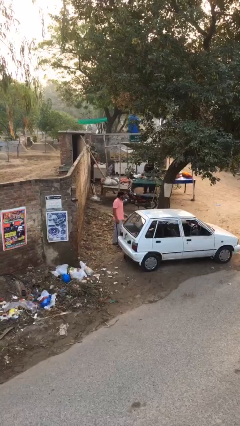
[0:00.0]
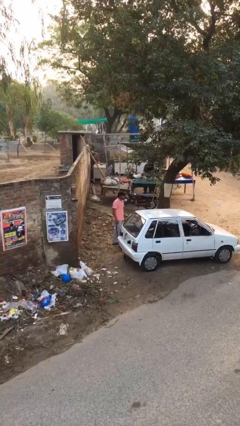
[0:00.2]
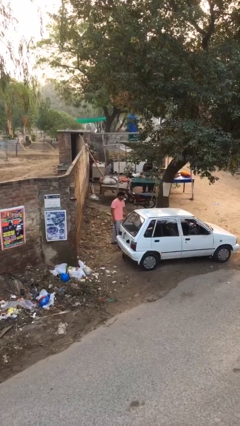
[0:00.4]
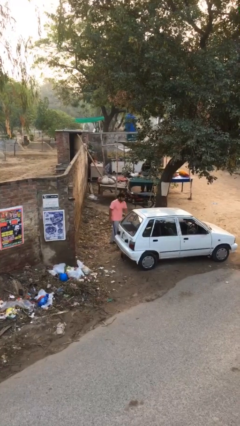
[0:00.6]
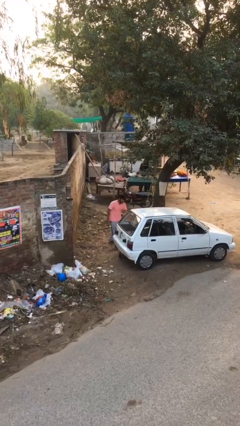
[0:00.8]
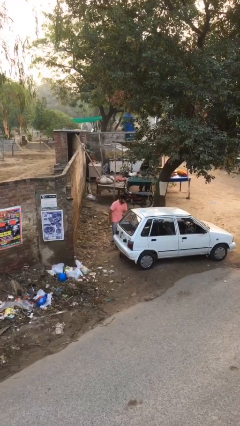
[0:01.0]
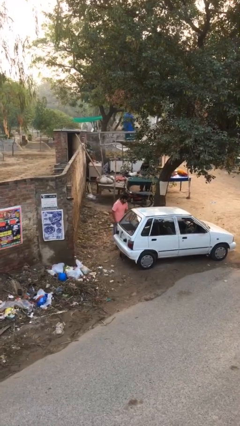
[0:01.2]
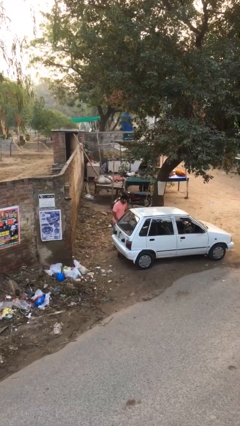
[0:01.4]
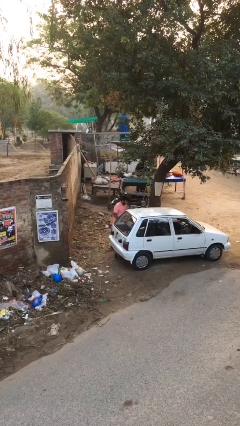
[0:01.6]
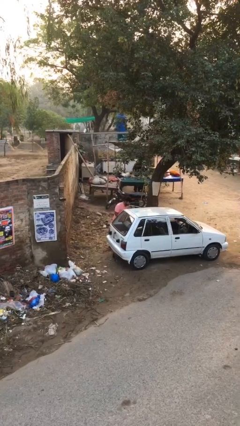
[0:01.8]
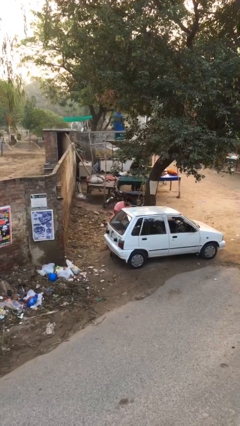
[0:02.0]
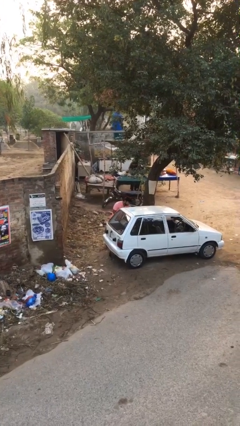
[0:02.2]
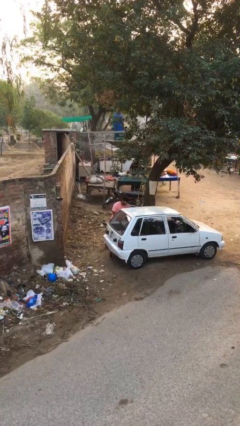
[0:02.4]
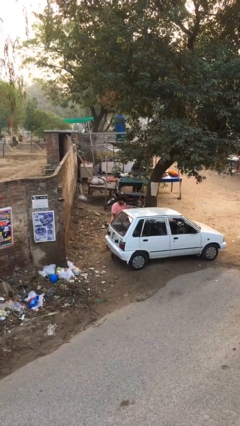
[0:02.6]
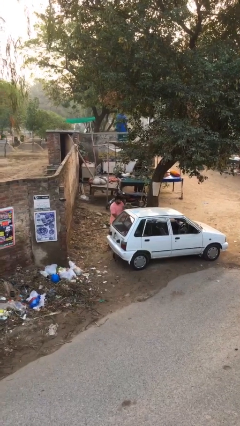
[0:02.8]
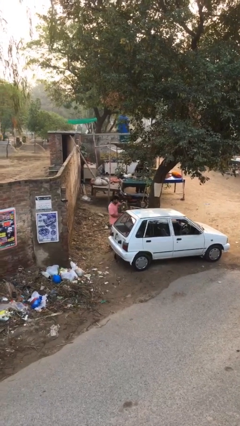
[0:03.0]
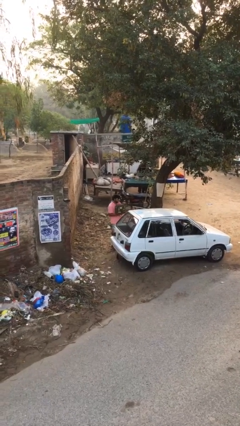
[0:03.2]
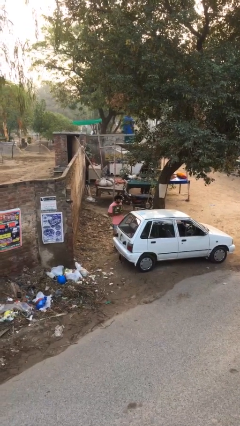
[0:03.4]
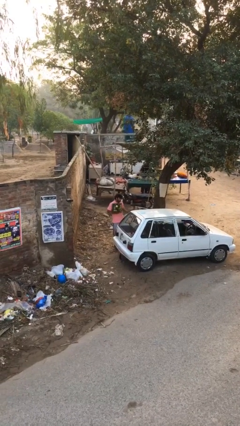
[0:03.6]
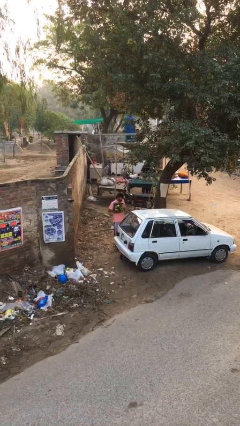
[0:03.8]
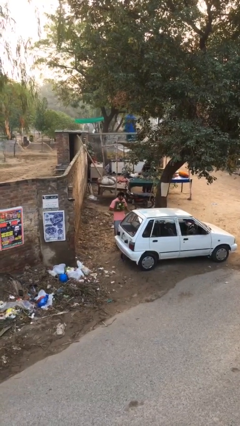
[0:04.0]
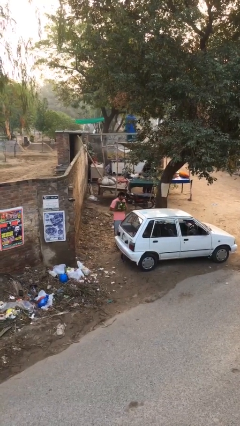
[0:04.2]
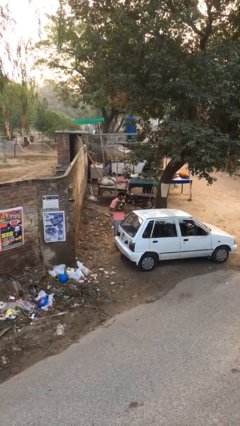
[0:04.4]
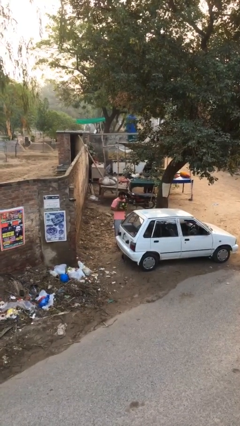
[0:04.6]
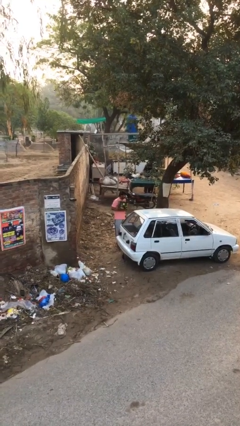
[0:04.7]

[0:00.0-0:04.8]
person unloads car

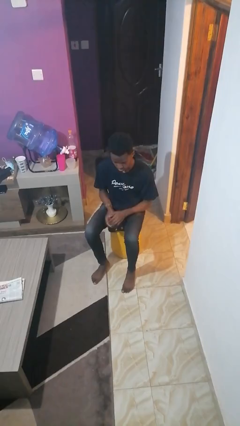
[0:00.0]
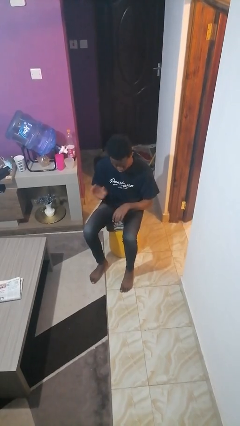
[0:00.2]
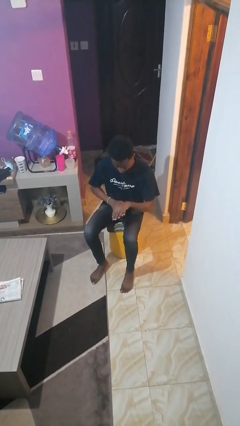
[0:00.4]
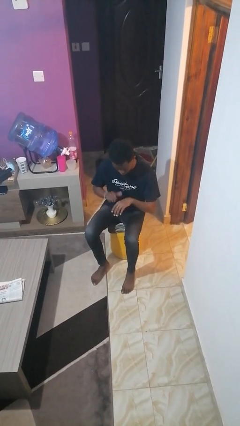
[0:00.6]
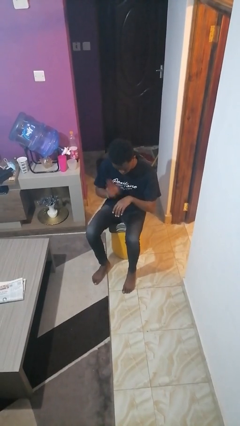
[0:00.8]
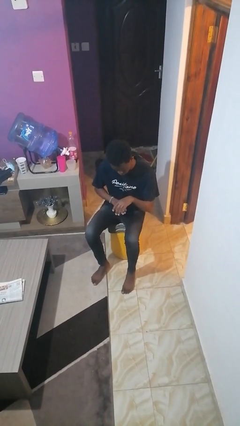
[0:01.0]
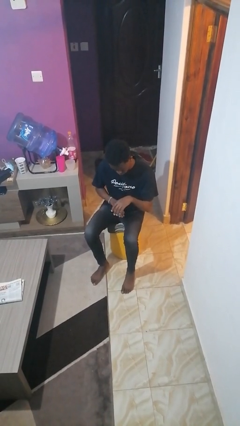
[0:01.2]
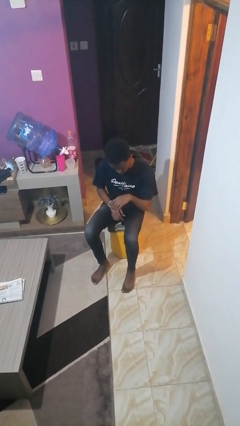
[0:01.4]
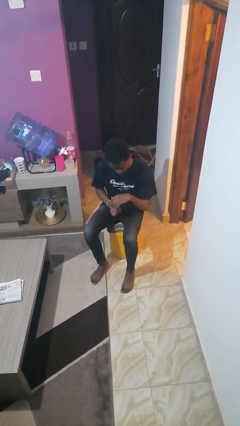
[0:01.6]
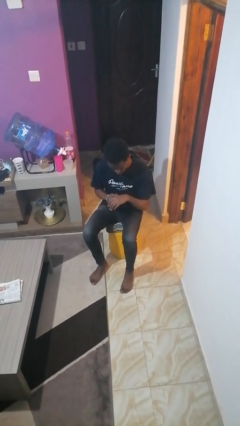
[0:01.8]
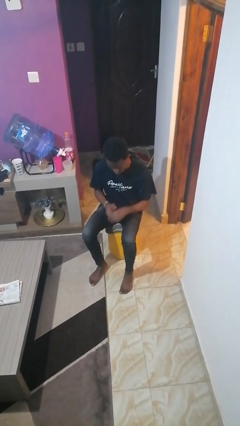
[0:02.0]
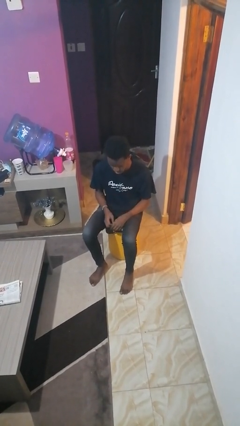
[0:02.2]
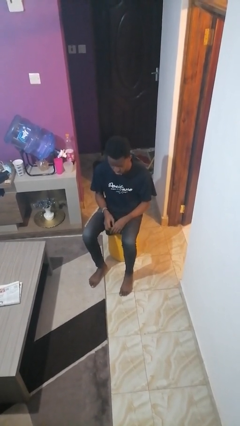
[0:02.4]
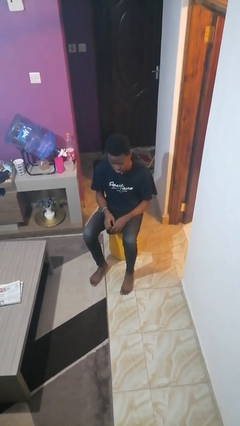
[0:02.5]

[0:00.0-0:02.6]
person swats bug

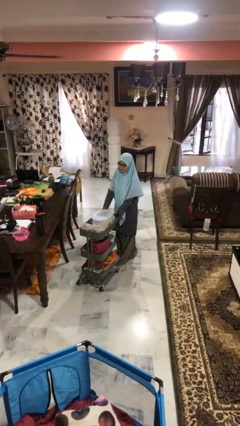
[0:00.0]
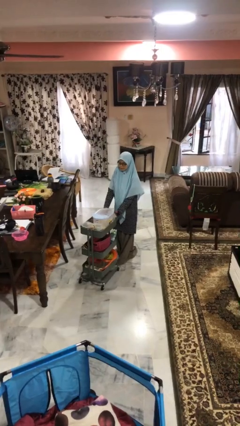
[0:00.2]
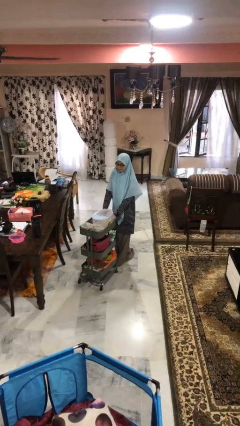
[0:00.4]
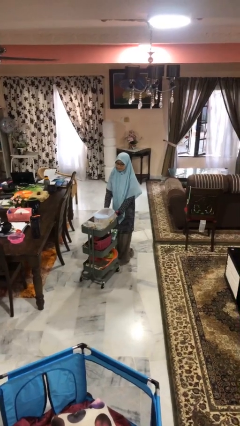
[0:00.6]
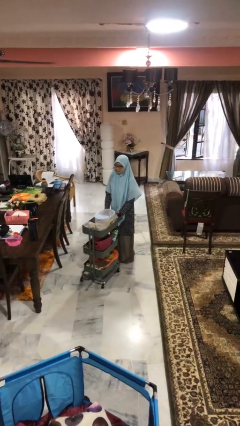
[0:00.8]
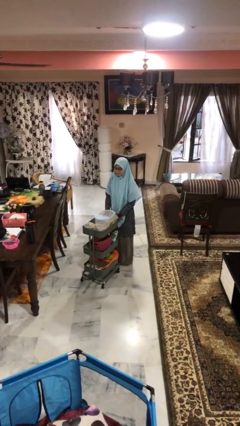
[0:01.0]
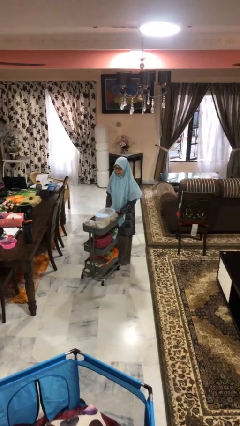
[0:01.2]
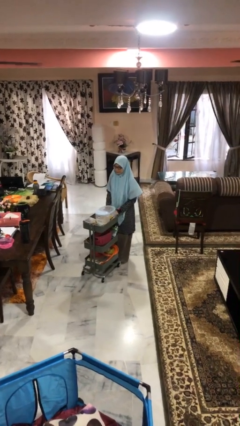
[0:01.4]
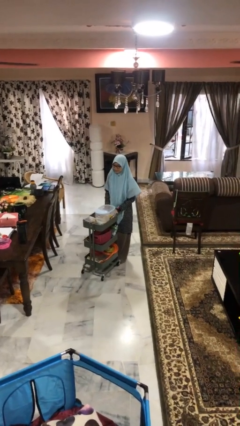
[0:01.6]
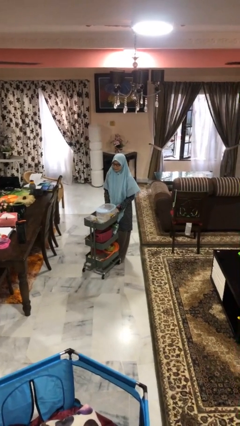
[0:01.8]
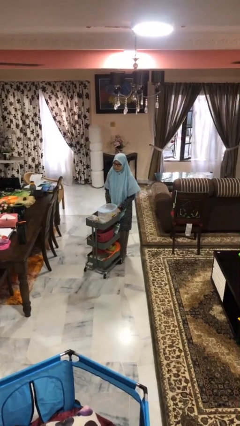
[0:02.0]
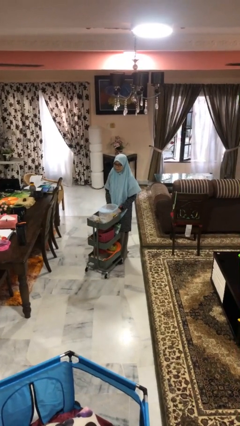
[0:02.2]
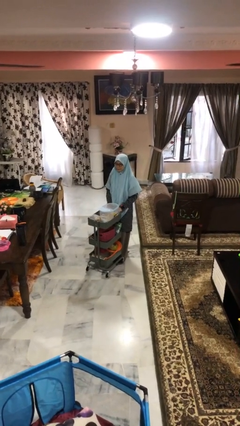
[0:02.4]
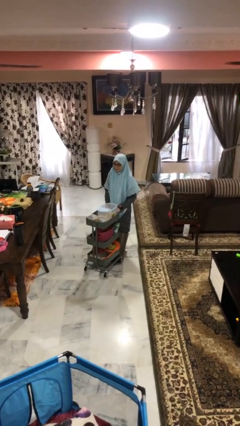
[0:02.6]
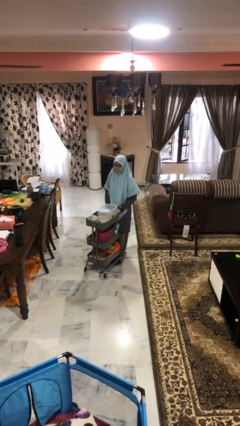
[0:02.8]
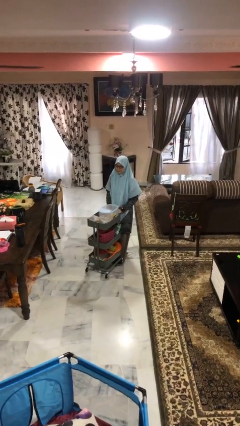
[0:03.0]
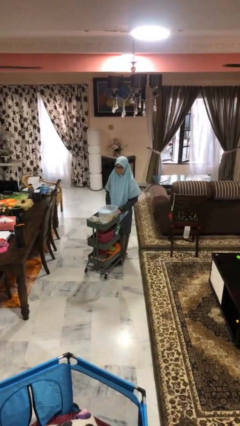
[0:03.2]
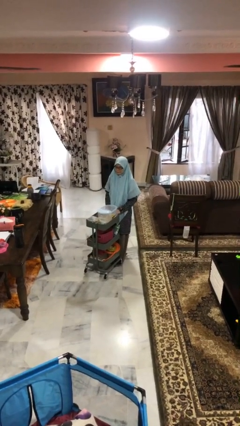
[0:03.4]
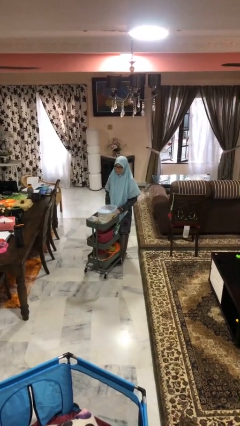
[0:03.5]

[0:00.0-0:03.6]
person pulls wheeled cart

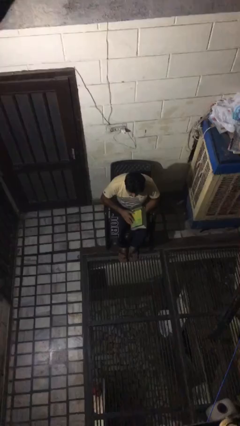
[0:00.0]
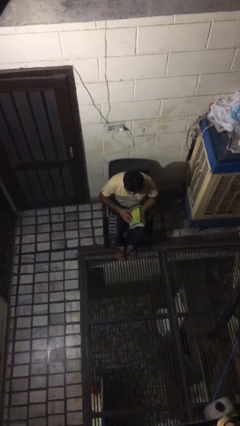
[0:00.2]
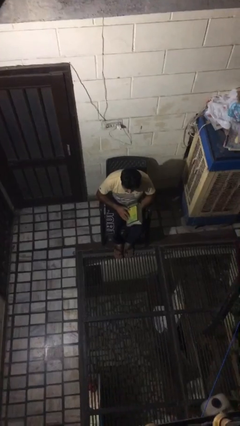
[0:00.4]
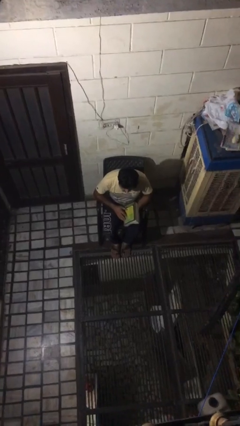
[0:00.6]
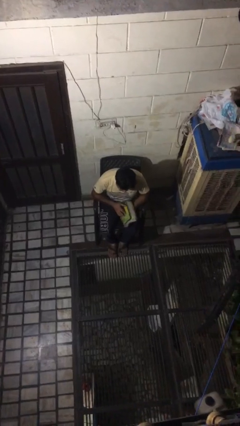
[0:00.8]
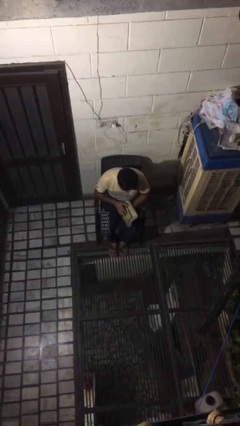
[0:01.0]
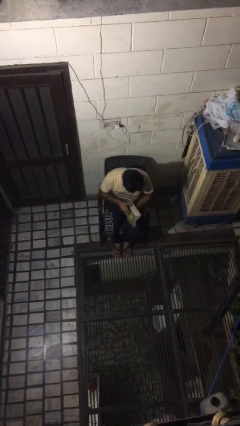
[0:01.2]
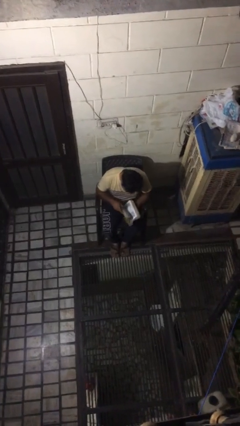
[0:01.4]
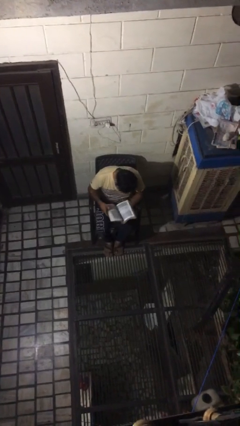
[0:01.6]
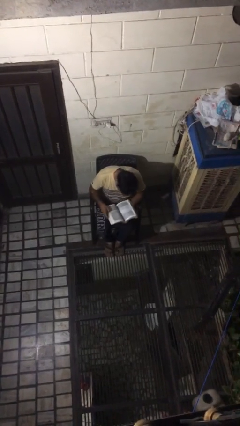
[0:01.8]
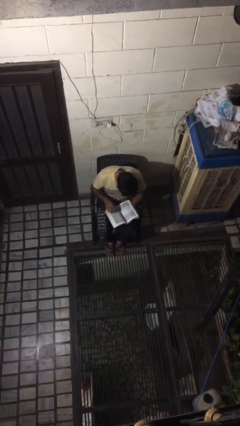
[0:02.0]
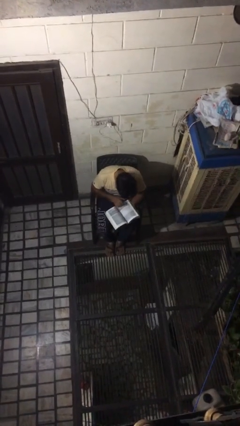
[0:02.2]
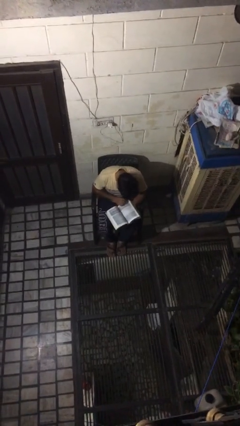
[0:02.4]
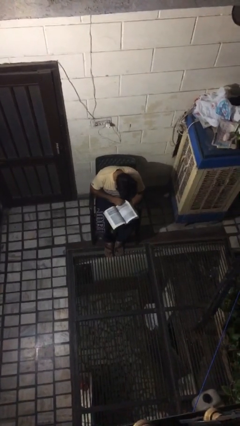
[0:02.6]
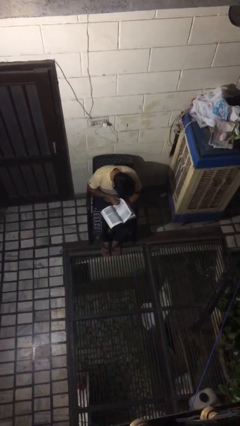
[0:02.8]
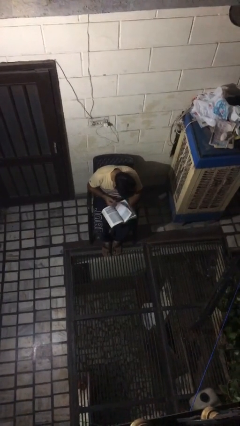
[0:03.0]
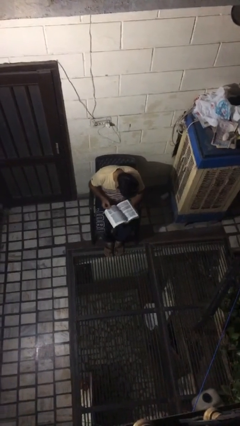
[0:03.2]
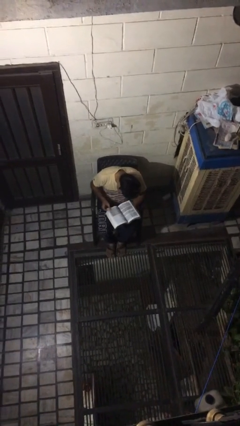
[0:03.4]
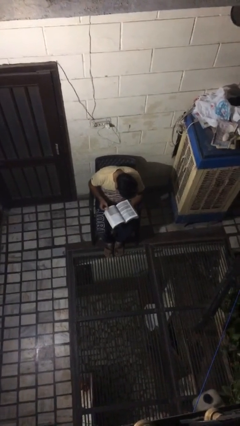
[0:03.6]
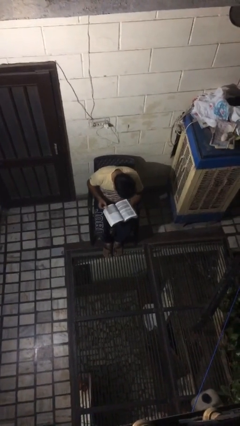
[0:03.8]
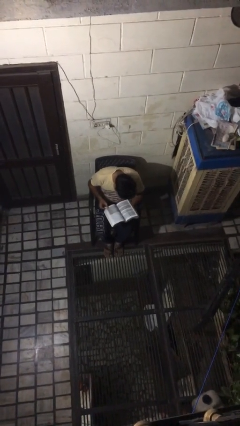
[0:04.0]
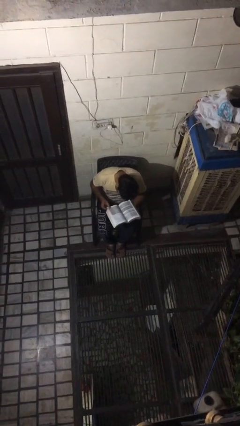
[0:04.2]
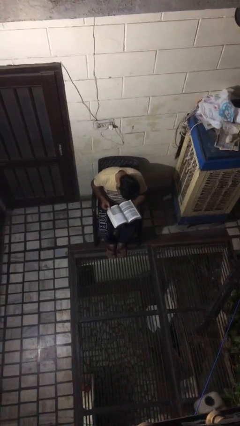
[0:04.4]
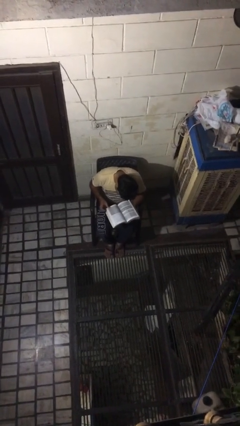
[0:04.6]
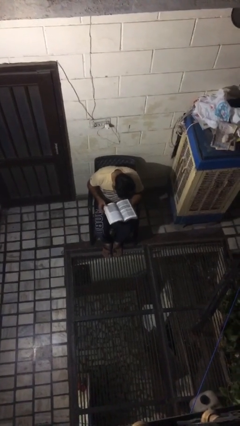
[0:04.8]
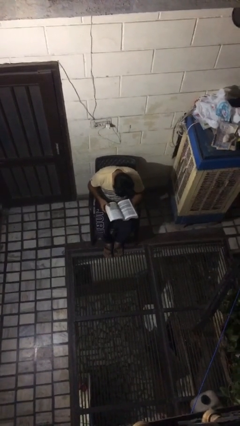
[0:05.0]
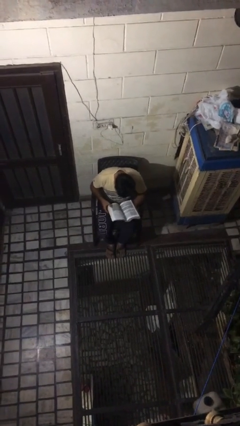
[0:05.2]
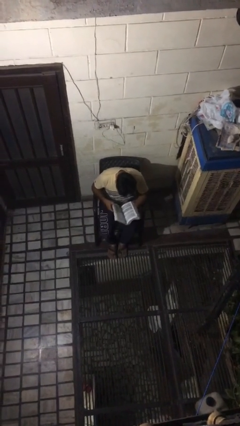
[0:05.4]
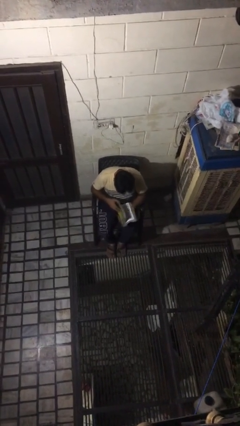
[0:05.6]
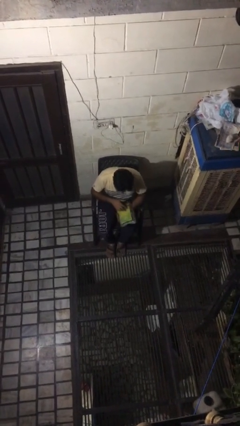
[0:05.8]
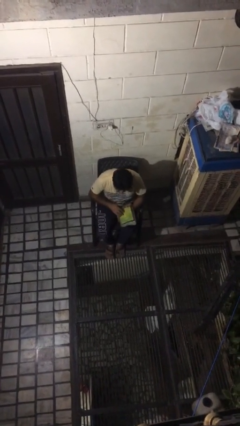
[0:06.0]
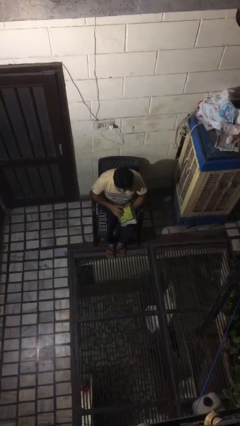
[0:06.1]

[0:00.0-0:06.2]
person reads book

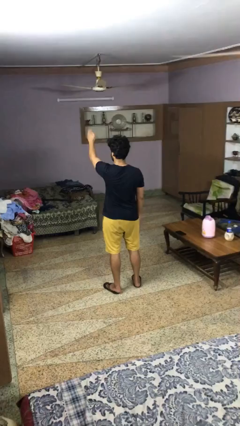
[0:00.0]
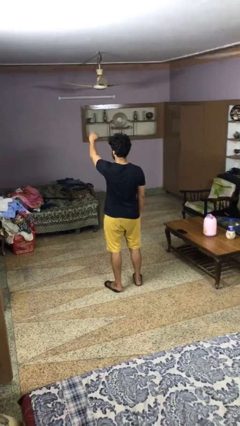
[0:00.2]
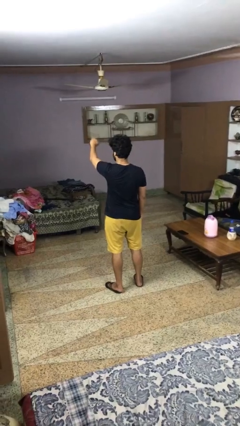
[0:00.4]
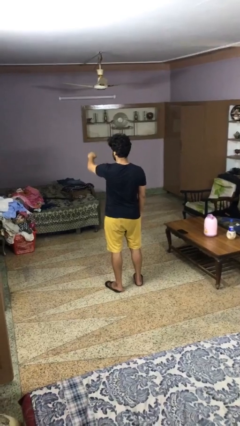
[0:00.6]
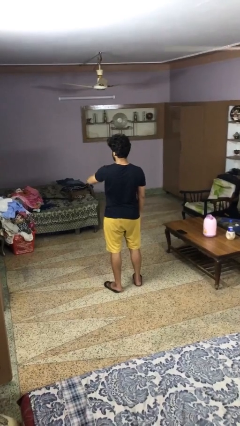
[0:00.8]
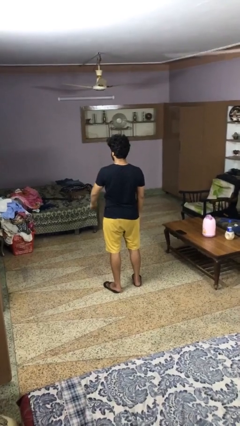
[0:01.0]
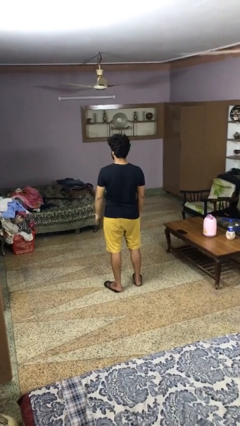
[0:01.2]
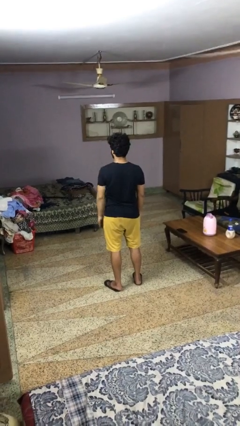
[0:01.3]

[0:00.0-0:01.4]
person gestures swipe down
